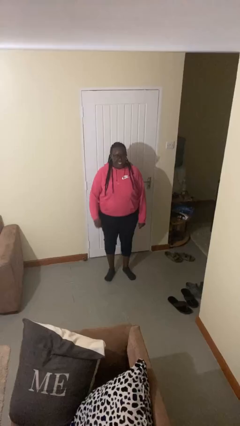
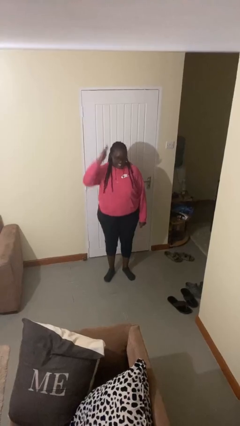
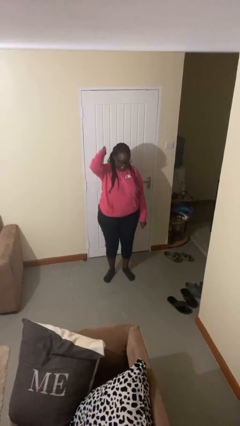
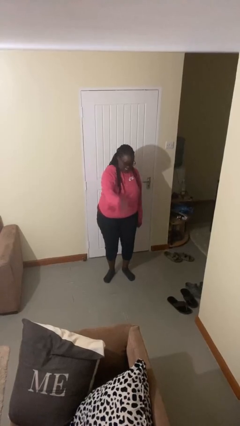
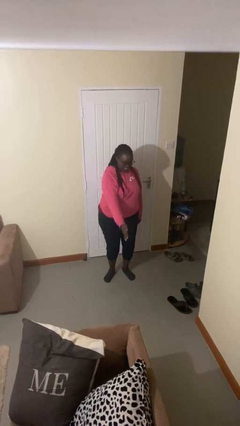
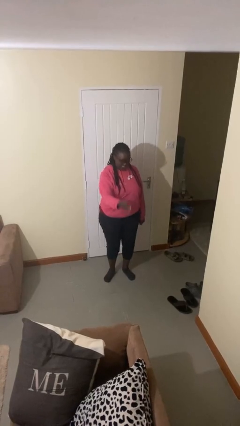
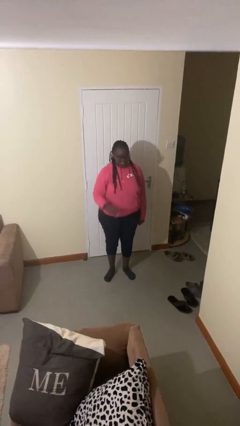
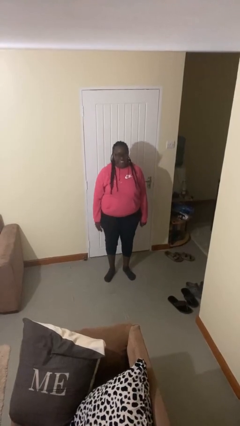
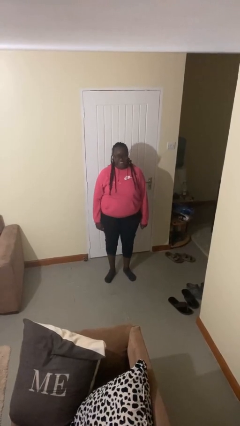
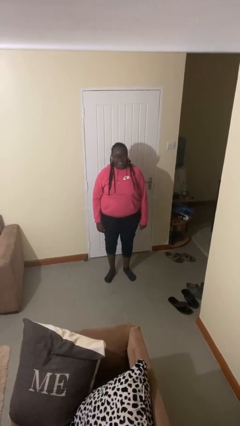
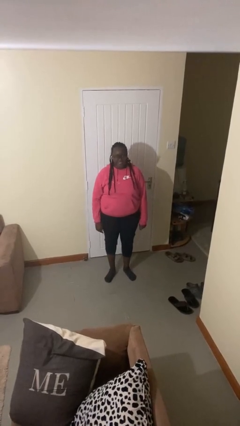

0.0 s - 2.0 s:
person karate chop

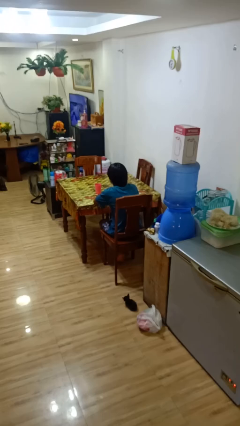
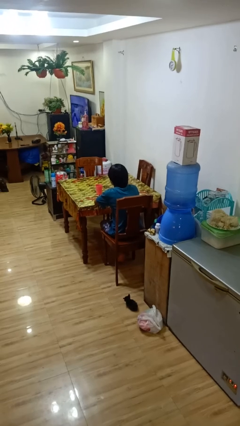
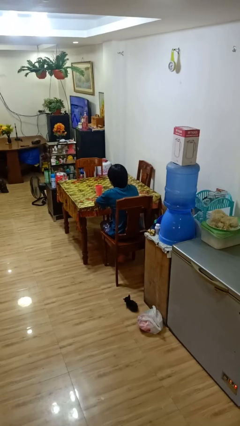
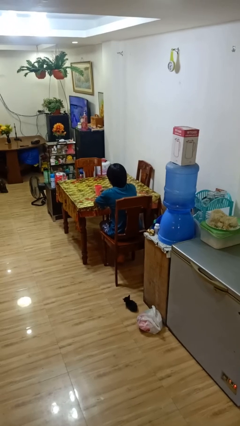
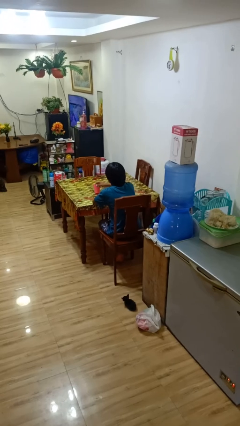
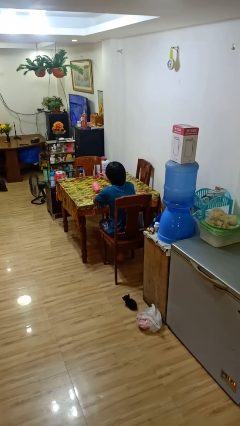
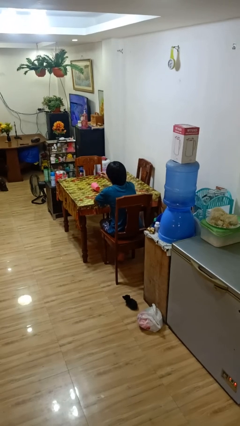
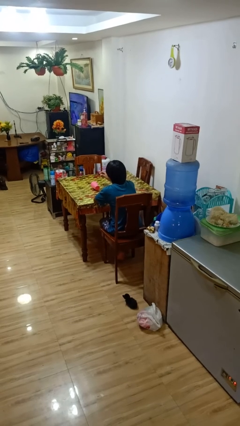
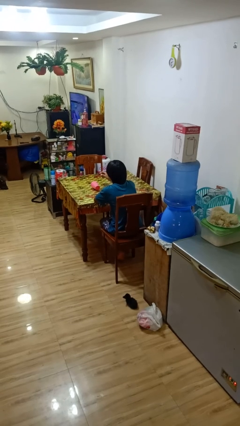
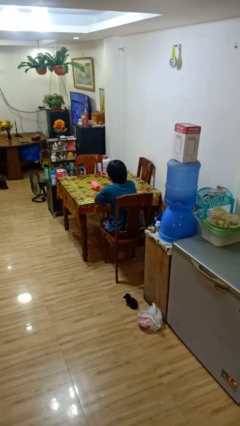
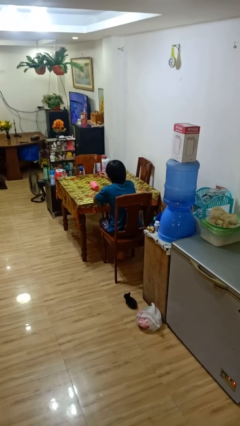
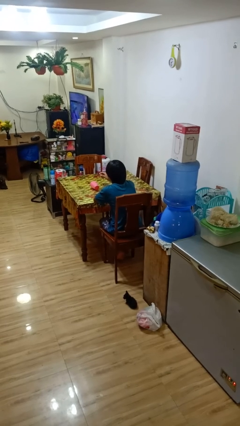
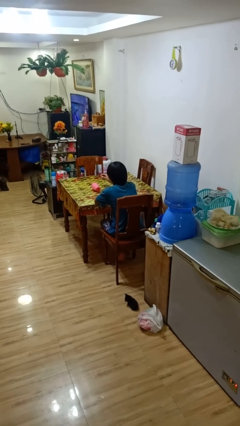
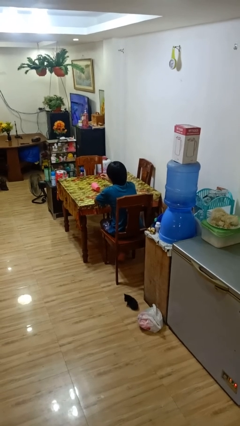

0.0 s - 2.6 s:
person knocks over glass

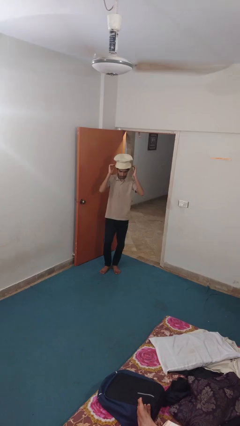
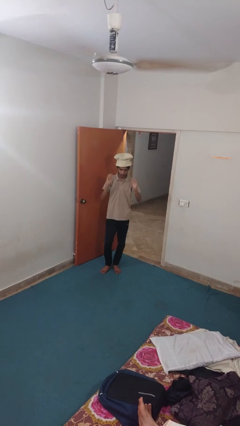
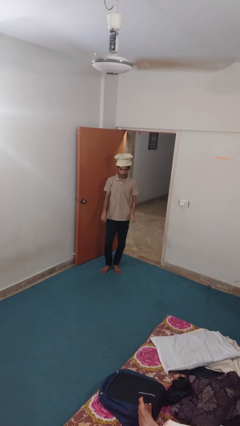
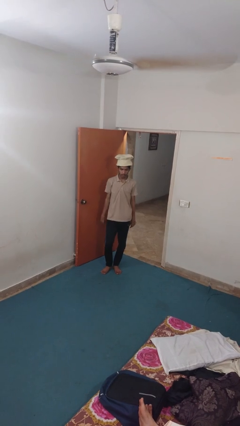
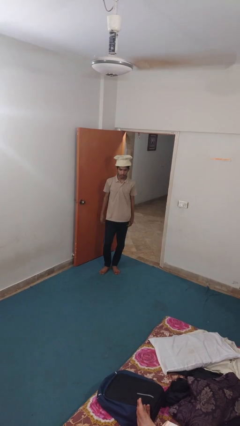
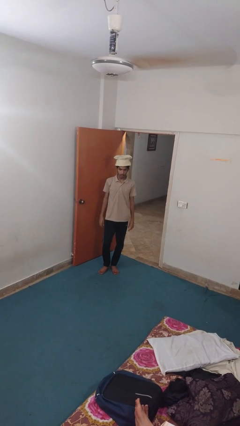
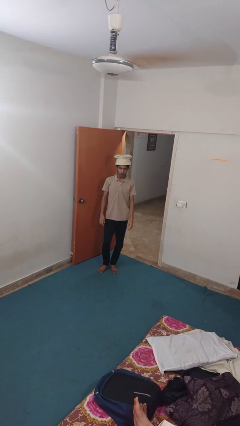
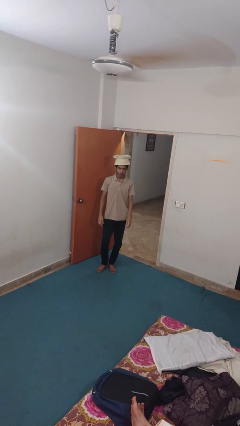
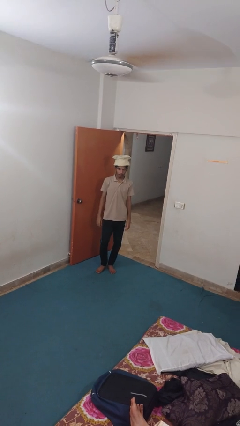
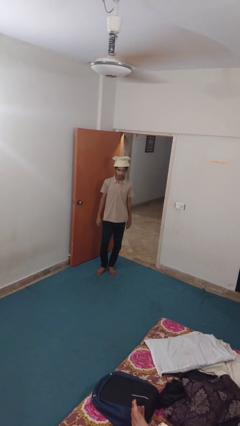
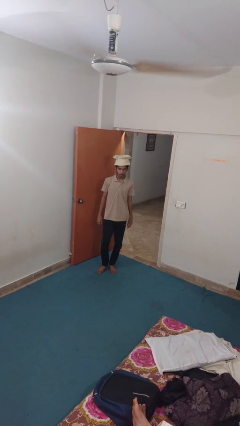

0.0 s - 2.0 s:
person puts on hat

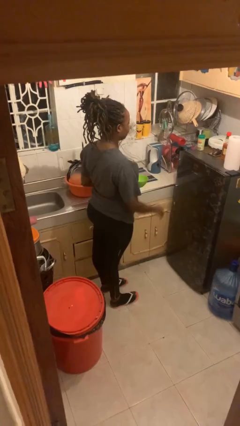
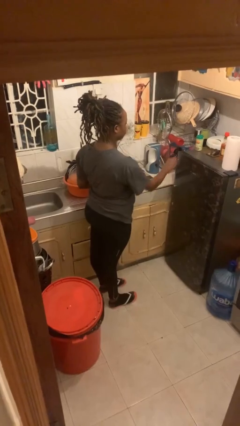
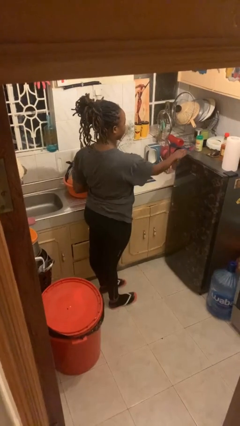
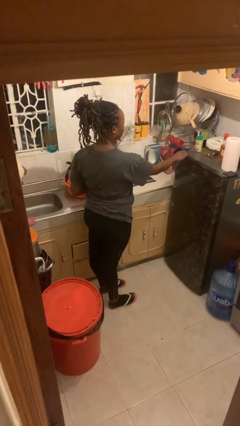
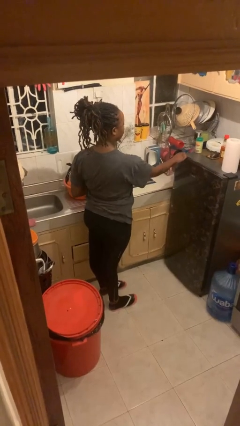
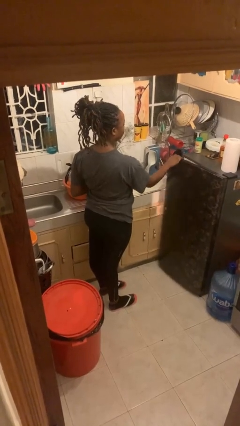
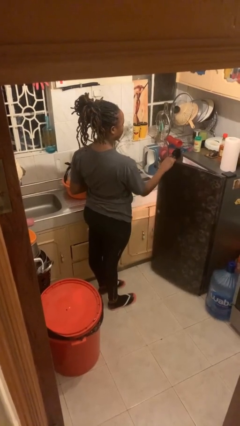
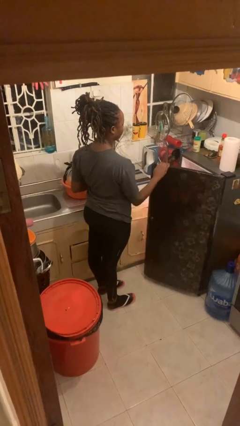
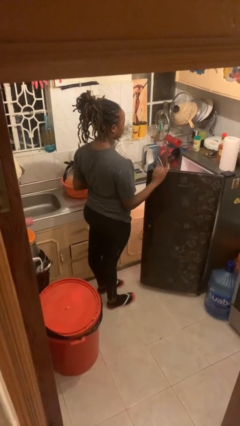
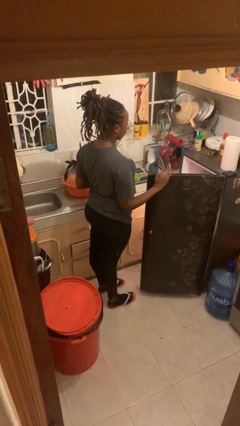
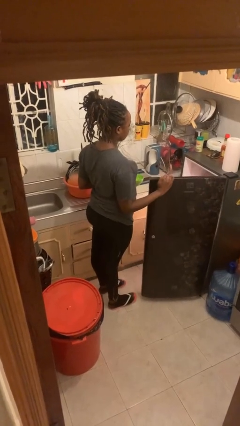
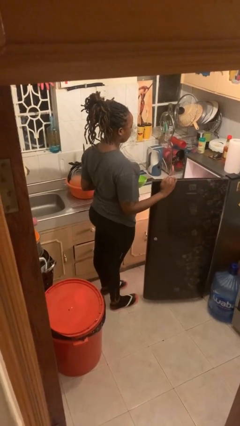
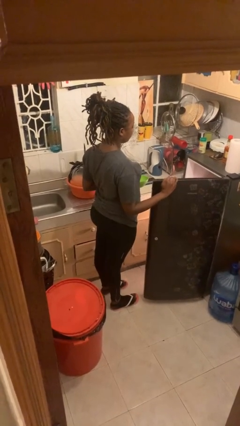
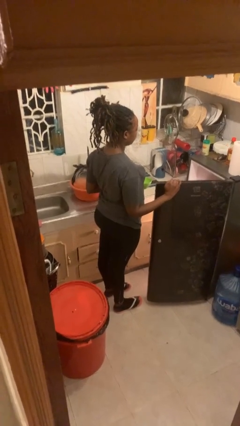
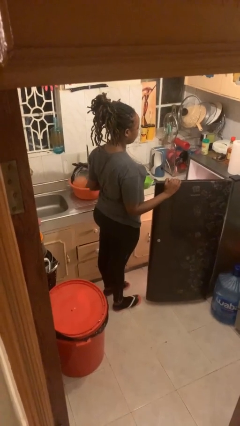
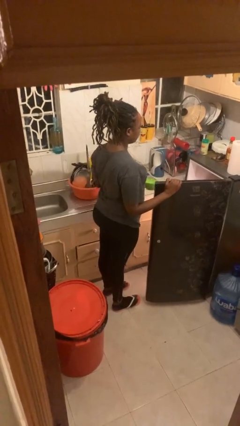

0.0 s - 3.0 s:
person opens refrigerator

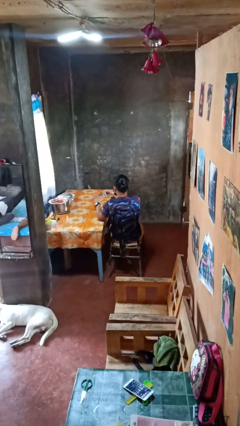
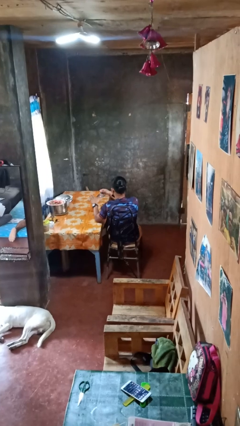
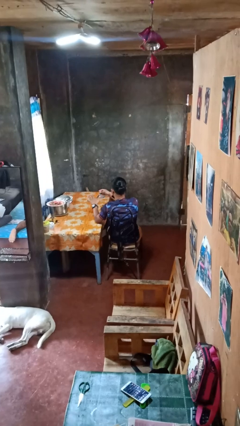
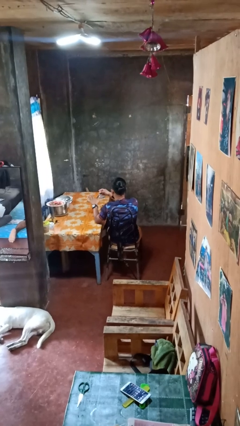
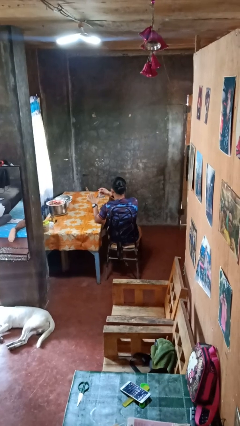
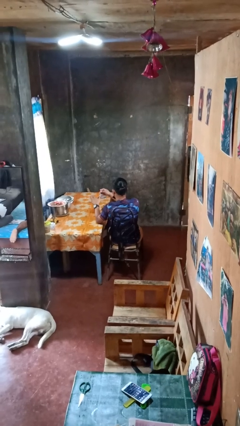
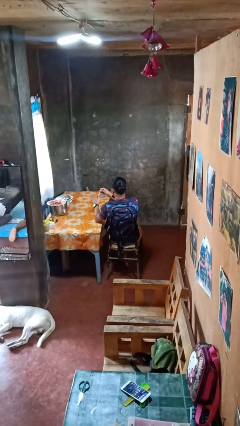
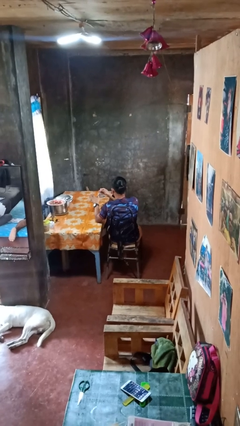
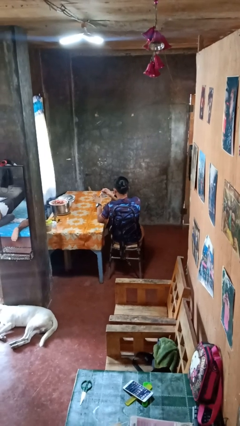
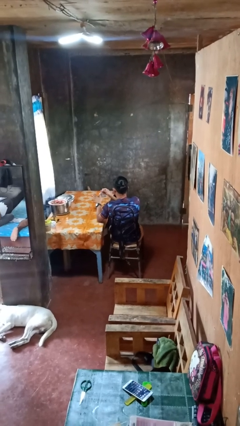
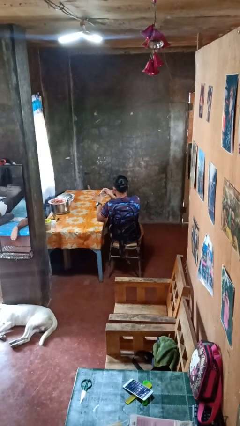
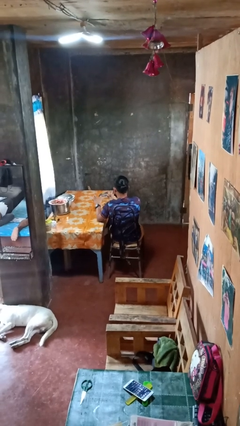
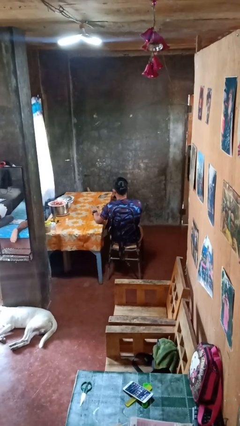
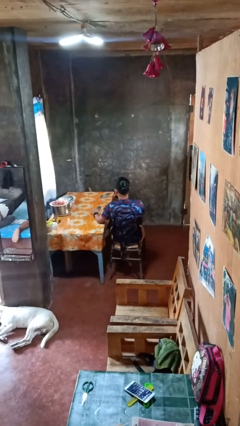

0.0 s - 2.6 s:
person clips fingernails

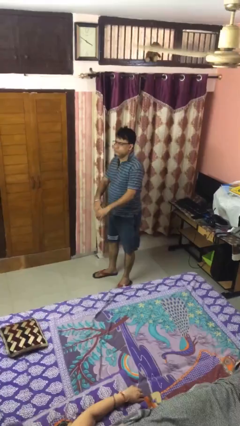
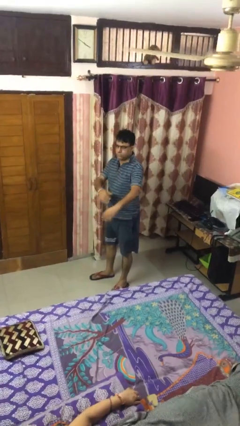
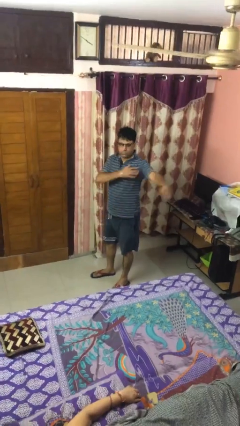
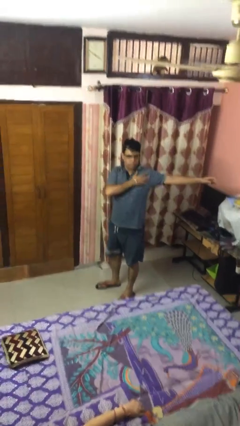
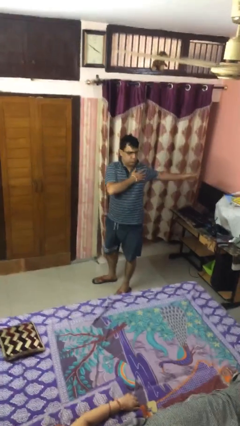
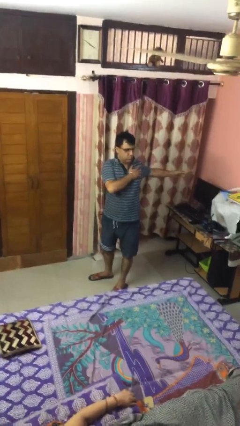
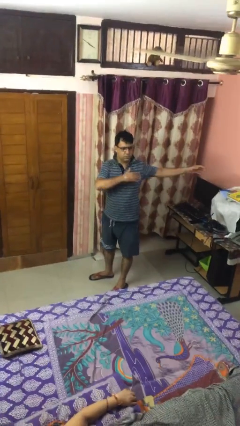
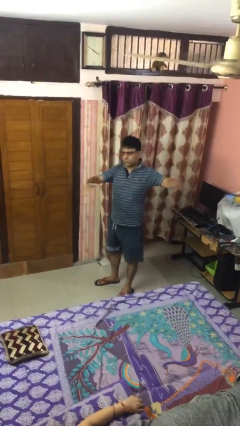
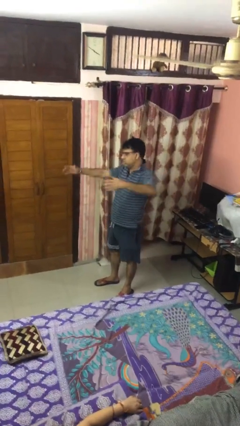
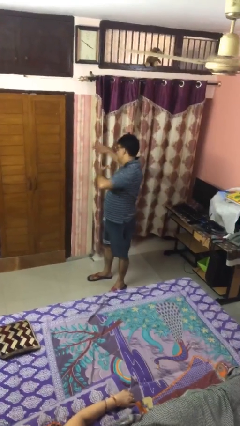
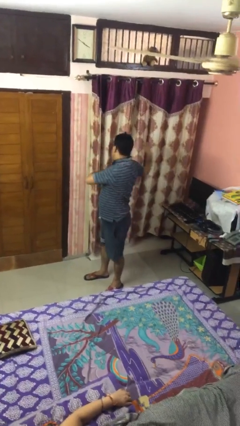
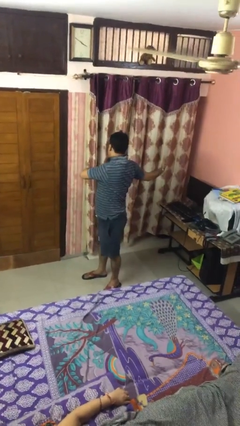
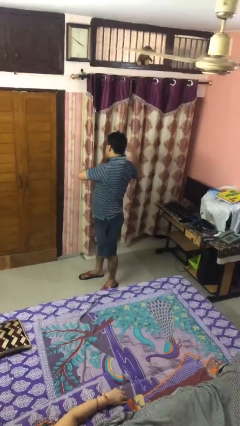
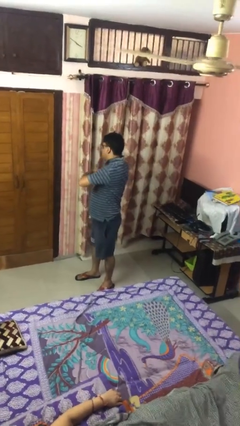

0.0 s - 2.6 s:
person stretches arms to side

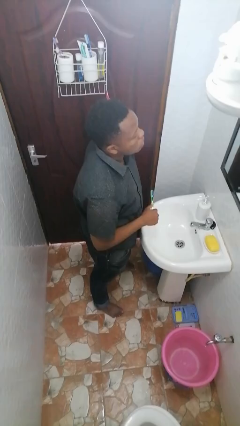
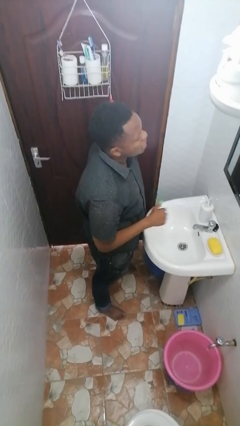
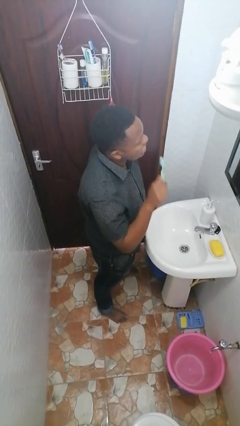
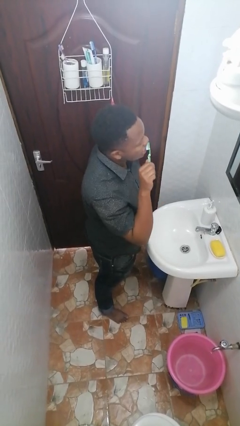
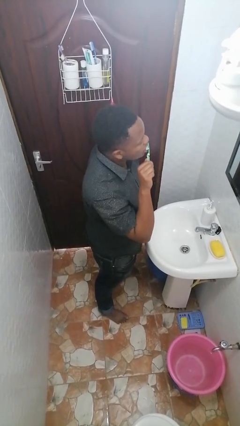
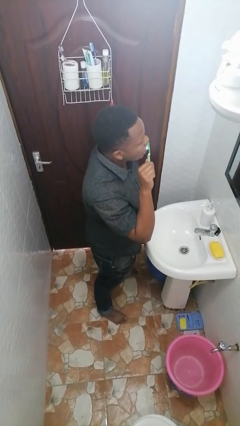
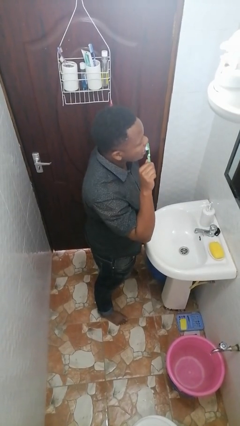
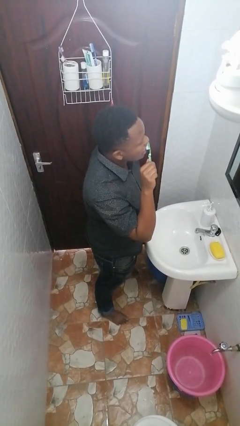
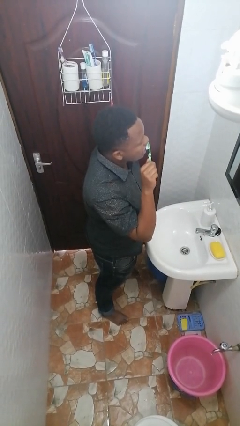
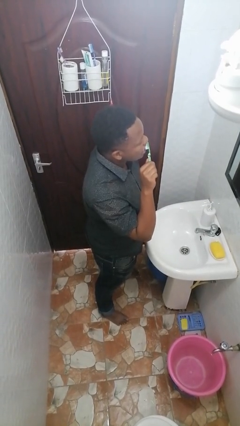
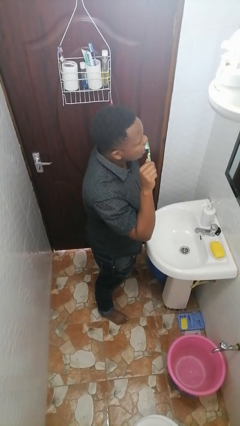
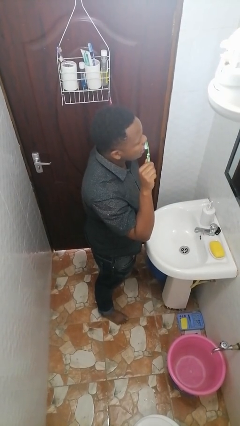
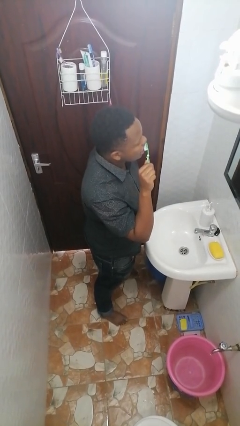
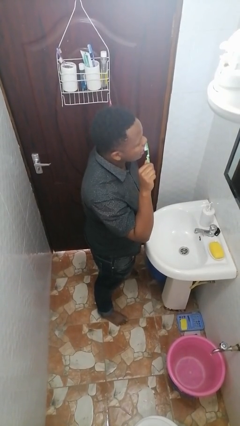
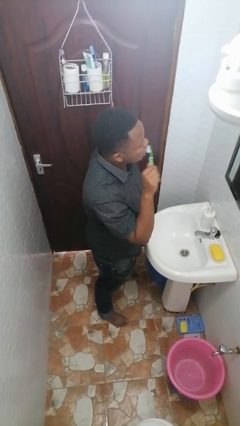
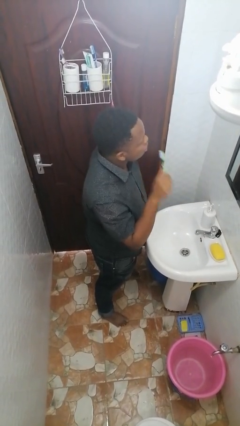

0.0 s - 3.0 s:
person brushes teeth
